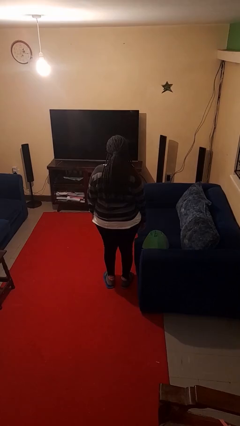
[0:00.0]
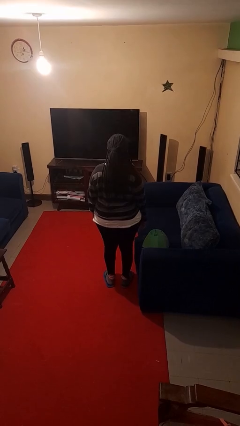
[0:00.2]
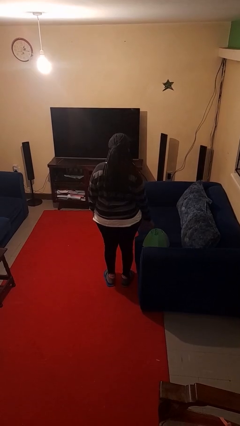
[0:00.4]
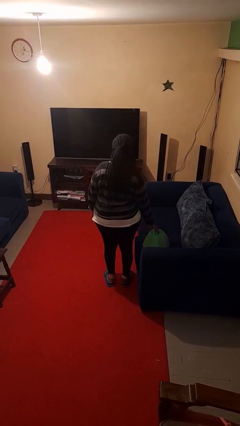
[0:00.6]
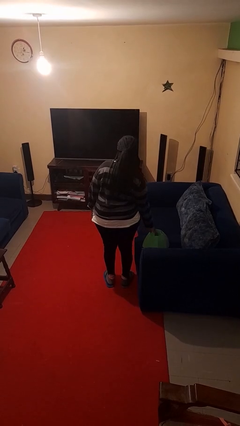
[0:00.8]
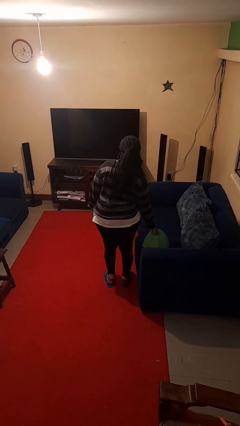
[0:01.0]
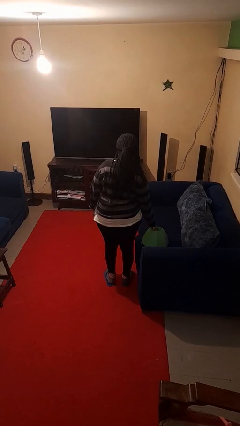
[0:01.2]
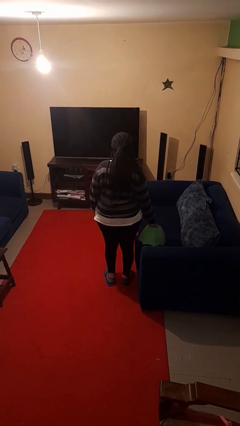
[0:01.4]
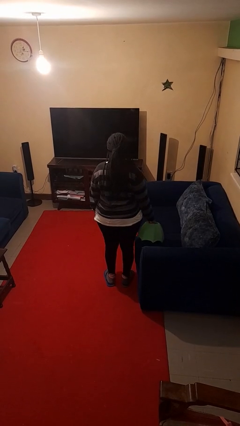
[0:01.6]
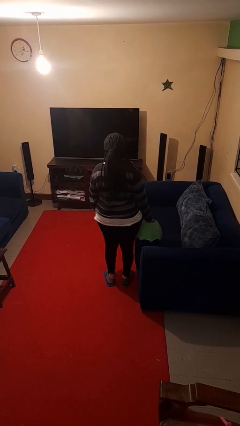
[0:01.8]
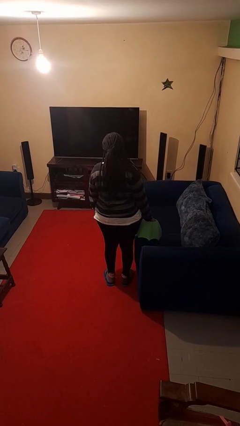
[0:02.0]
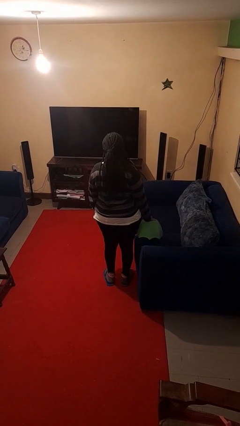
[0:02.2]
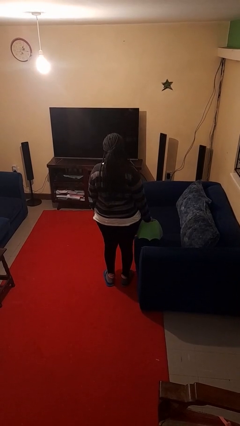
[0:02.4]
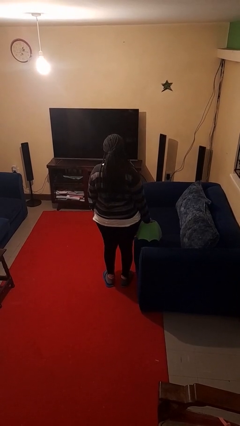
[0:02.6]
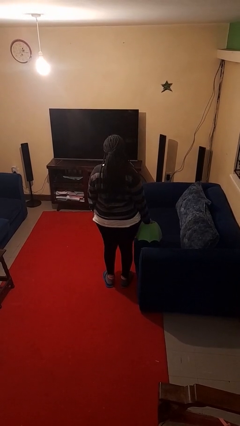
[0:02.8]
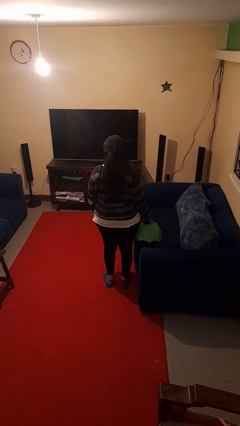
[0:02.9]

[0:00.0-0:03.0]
person picks up object from couch

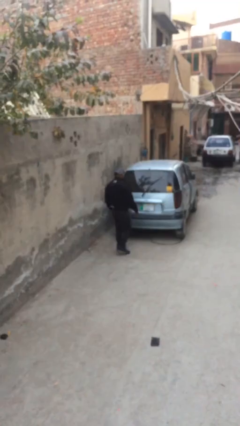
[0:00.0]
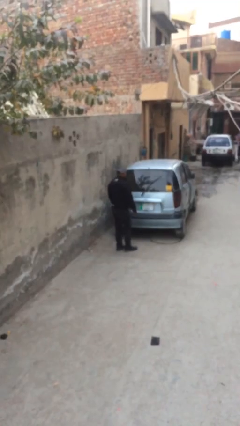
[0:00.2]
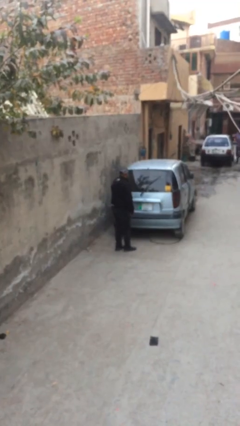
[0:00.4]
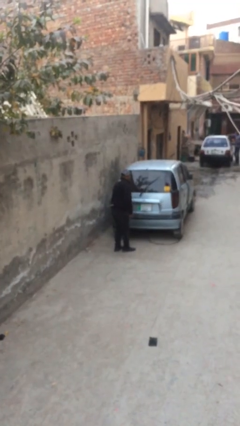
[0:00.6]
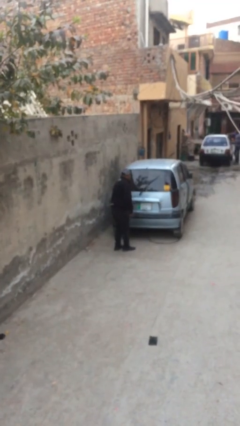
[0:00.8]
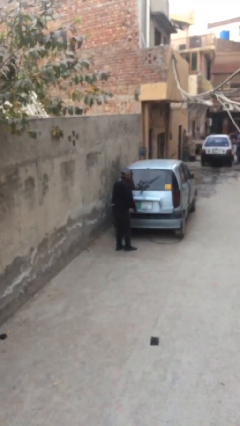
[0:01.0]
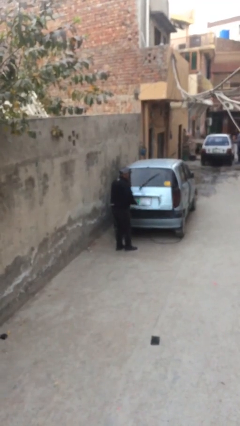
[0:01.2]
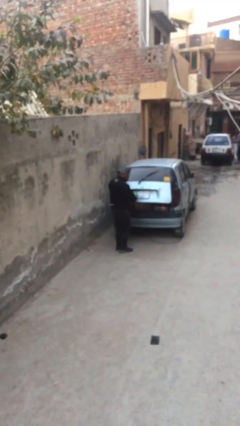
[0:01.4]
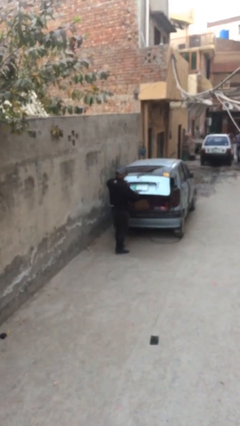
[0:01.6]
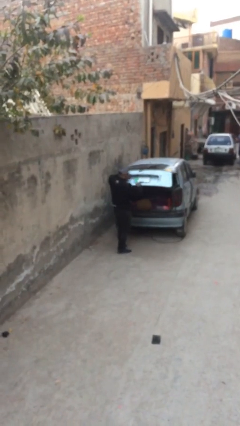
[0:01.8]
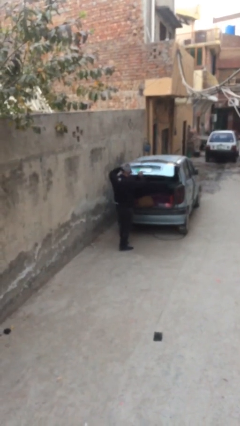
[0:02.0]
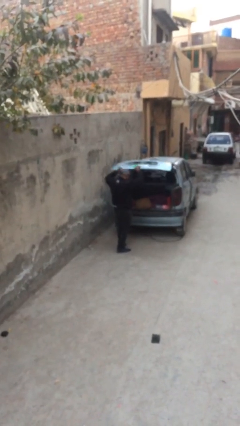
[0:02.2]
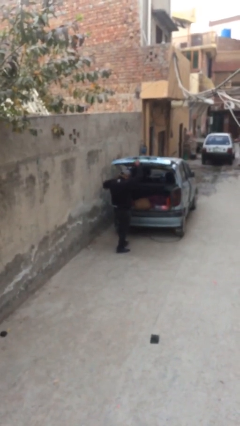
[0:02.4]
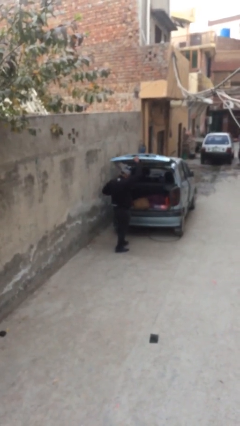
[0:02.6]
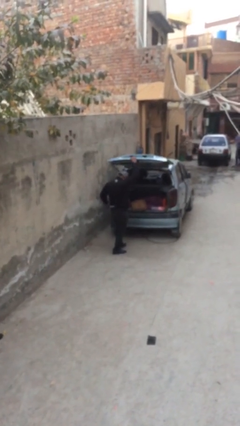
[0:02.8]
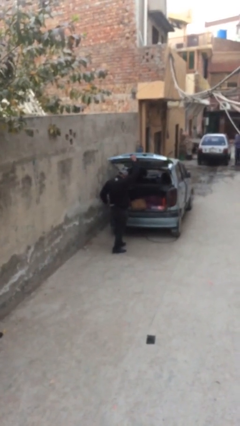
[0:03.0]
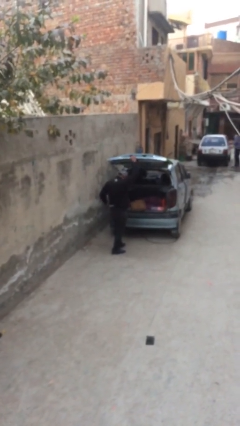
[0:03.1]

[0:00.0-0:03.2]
person opens car trunk

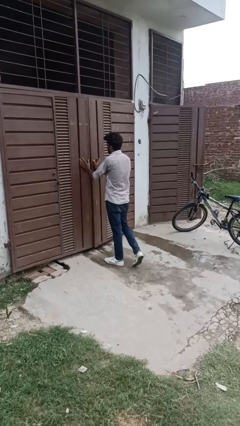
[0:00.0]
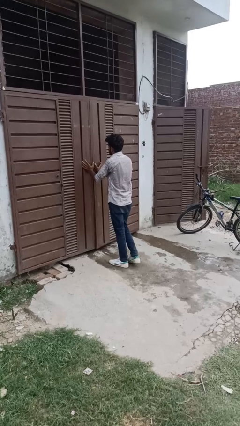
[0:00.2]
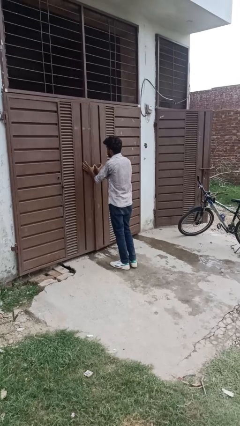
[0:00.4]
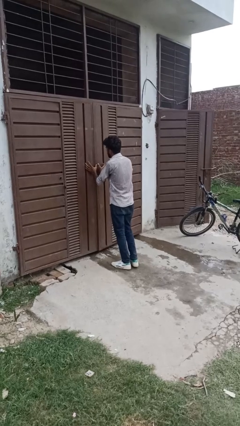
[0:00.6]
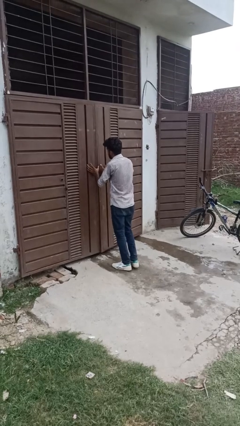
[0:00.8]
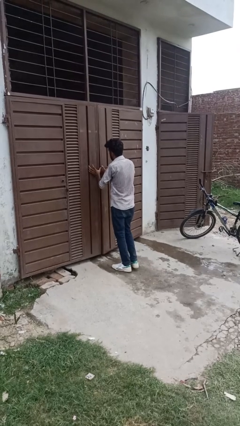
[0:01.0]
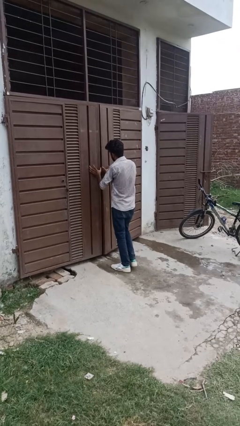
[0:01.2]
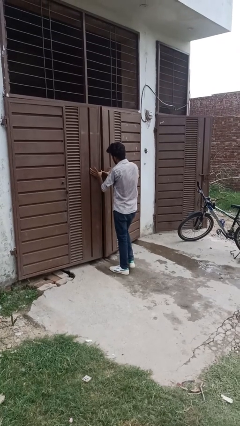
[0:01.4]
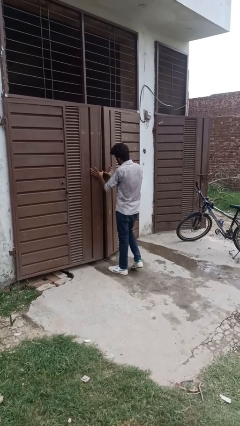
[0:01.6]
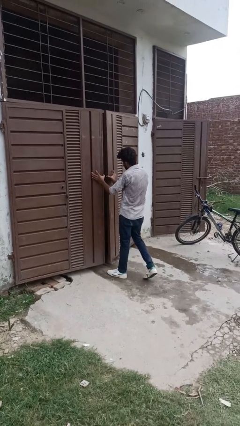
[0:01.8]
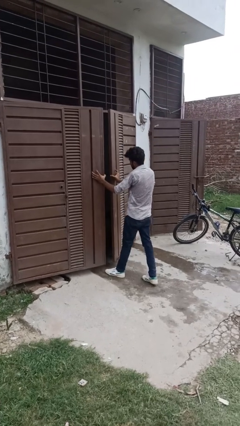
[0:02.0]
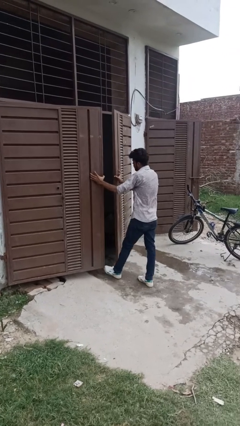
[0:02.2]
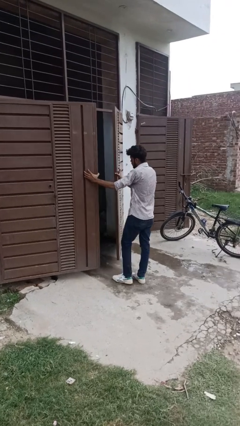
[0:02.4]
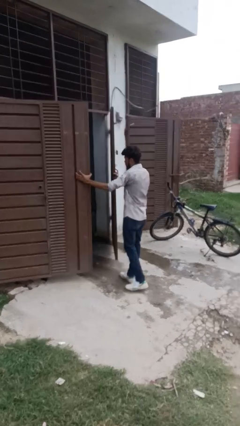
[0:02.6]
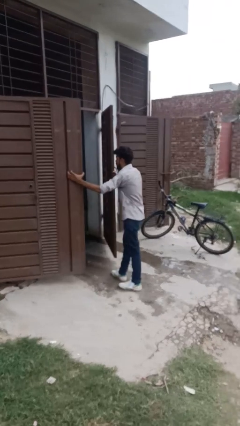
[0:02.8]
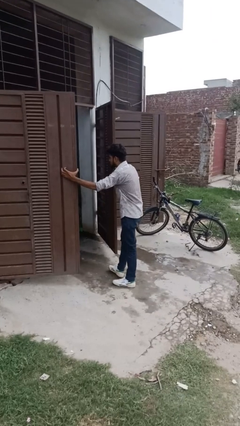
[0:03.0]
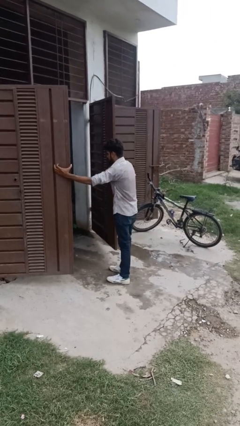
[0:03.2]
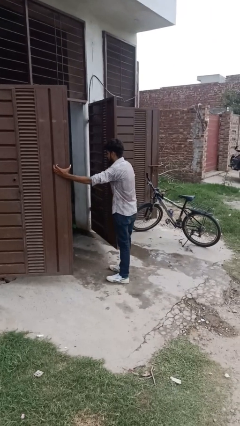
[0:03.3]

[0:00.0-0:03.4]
person opens gate

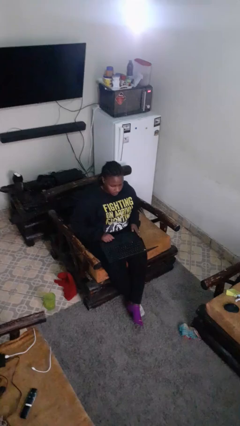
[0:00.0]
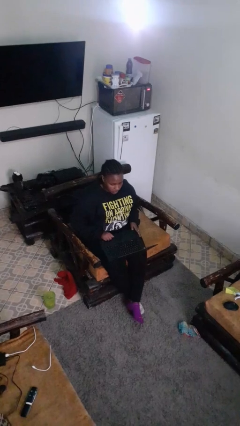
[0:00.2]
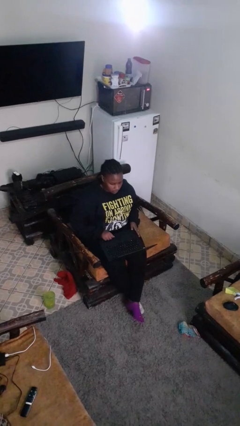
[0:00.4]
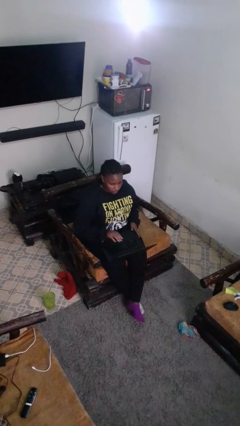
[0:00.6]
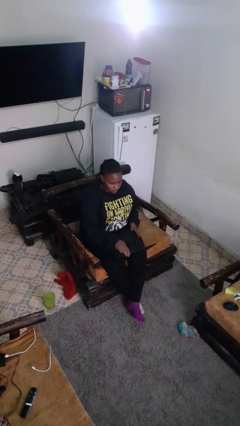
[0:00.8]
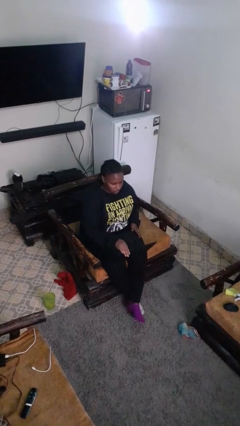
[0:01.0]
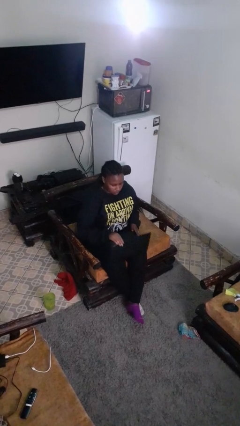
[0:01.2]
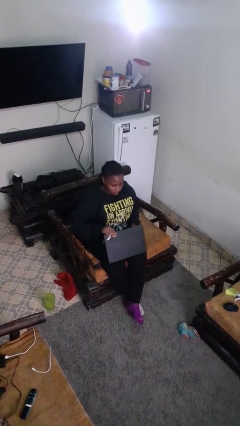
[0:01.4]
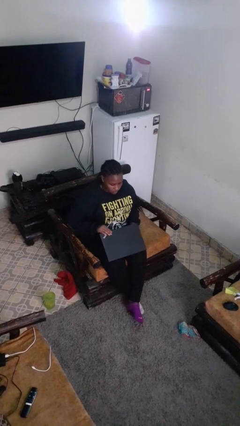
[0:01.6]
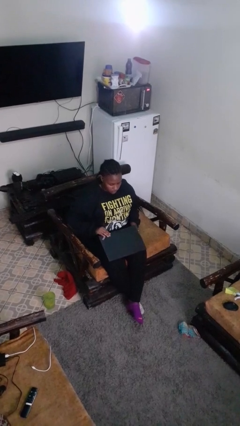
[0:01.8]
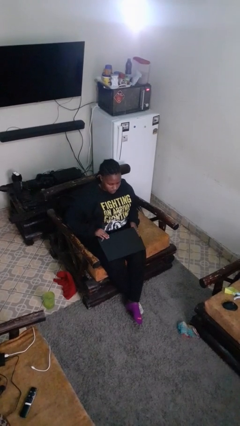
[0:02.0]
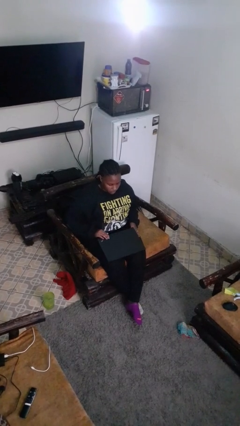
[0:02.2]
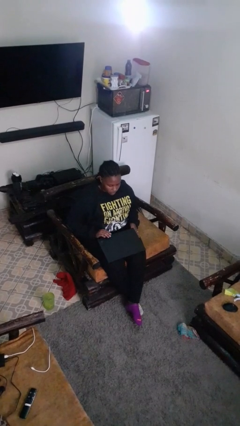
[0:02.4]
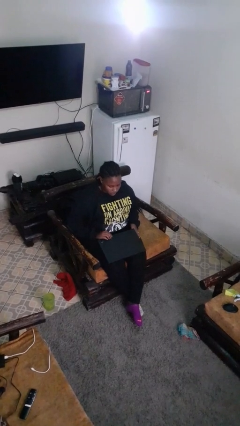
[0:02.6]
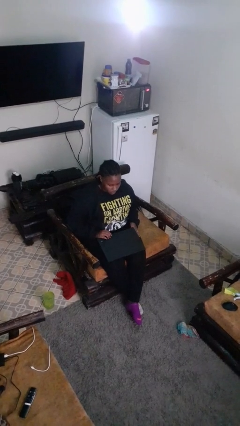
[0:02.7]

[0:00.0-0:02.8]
person closes laptop

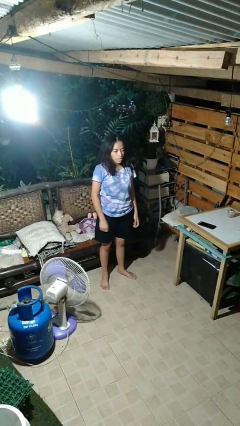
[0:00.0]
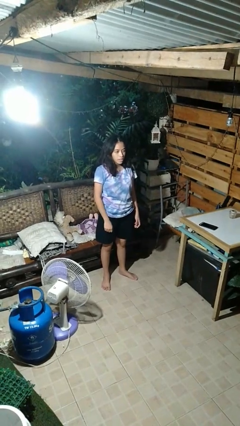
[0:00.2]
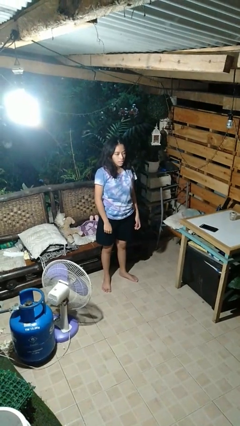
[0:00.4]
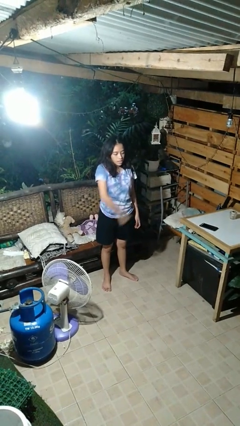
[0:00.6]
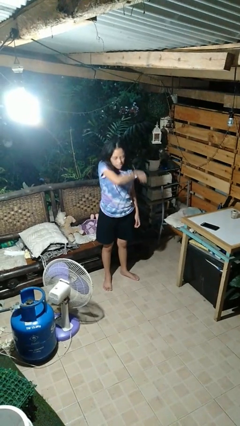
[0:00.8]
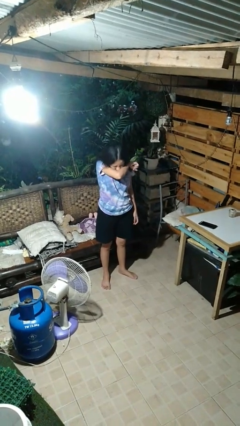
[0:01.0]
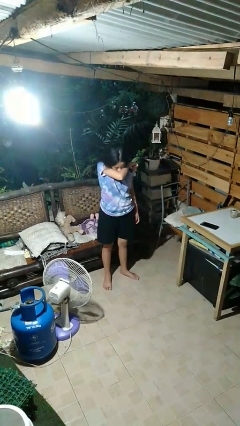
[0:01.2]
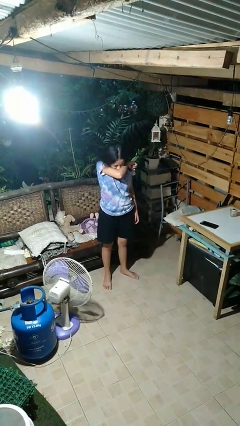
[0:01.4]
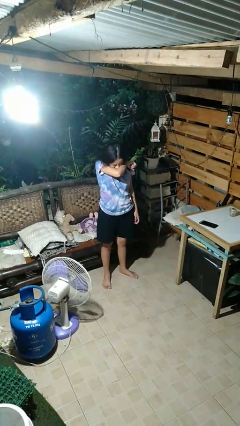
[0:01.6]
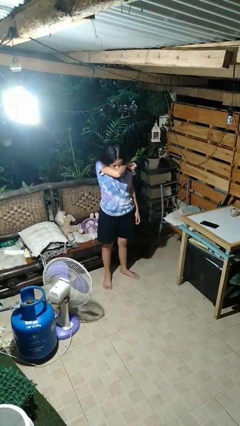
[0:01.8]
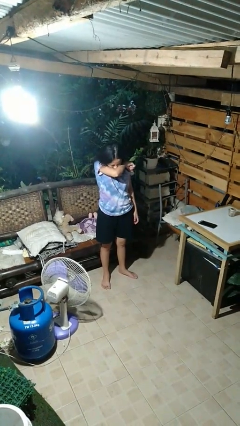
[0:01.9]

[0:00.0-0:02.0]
person sneezes into arm

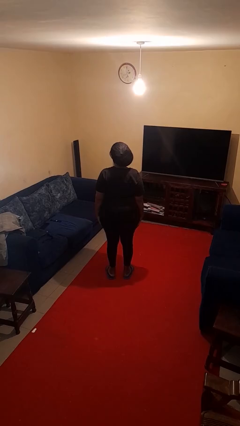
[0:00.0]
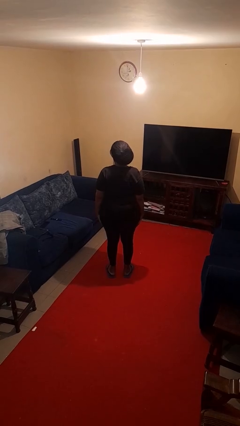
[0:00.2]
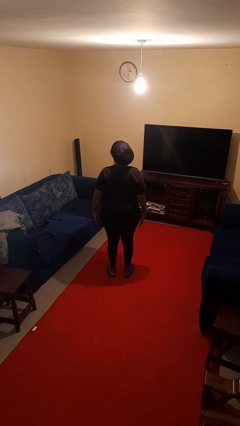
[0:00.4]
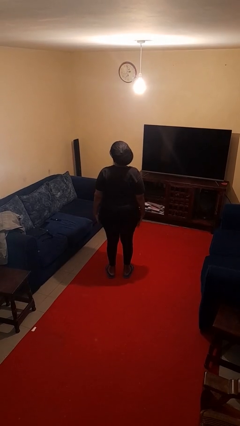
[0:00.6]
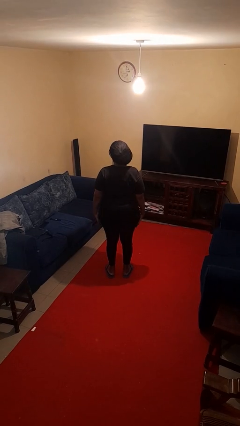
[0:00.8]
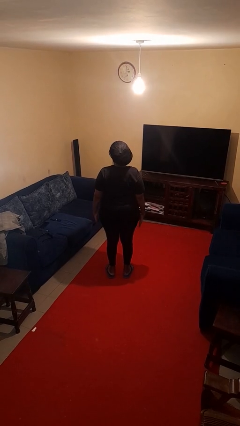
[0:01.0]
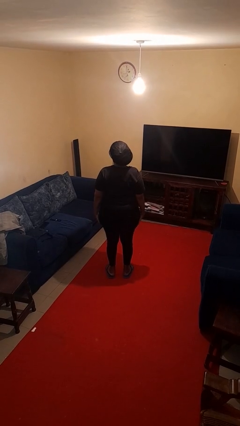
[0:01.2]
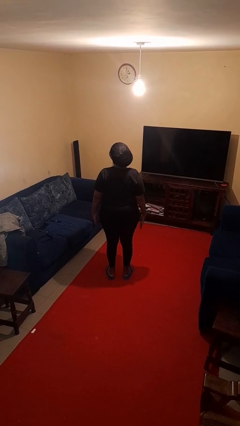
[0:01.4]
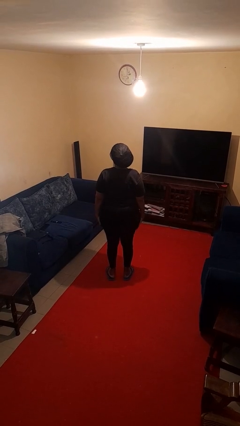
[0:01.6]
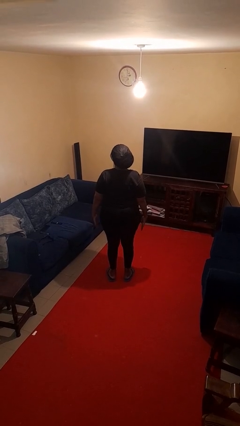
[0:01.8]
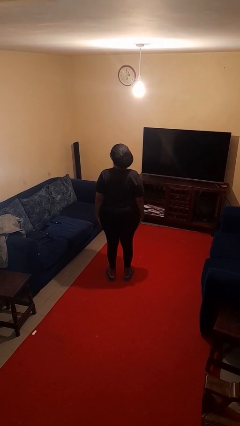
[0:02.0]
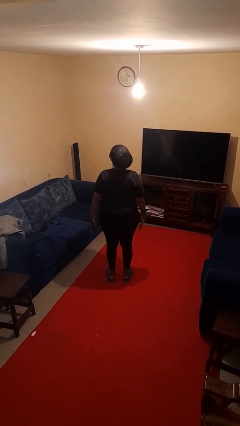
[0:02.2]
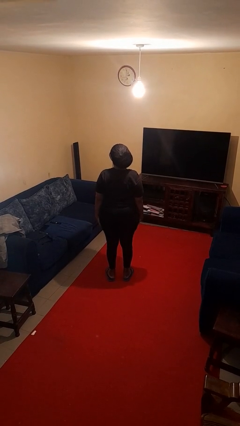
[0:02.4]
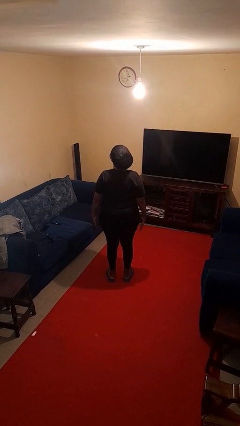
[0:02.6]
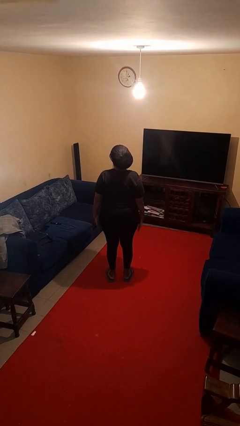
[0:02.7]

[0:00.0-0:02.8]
person slaps hands on thighs

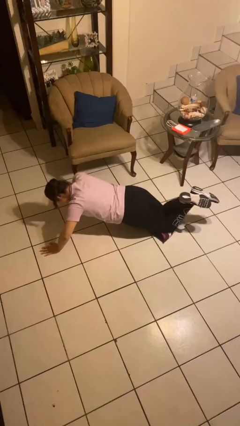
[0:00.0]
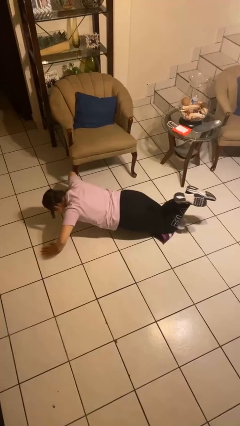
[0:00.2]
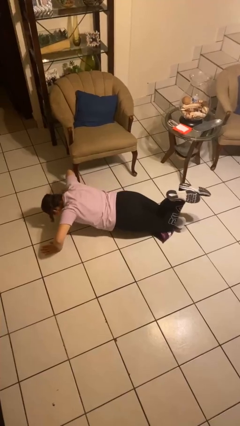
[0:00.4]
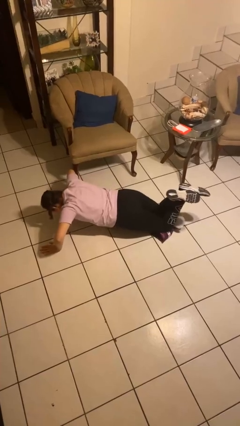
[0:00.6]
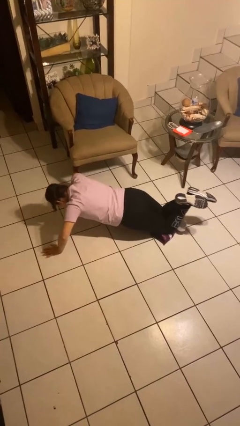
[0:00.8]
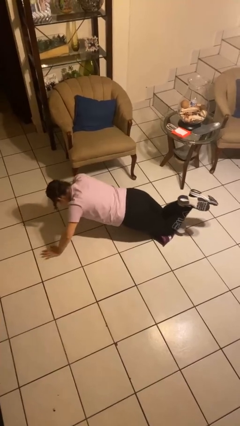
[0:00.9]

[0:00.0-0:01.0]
person exercises with pushup
